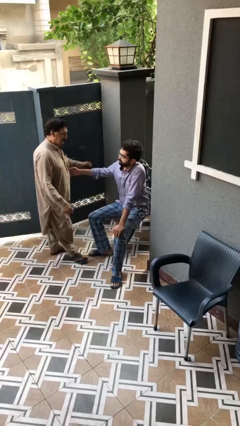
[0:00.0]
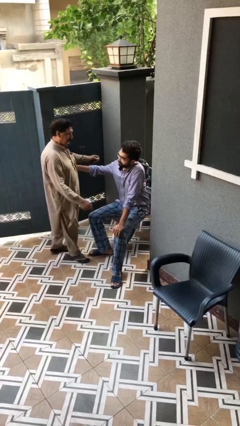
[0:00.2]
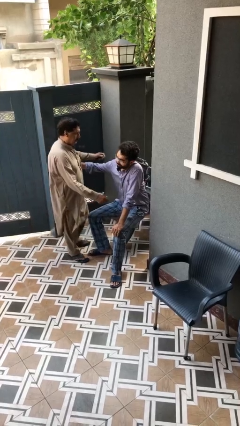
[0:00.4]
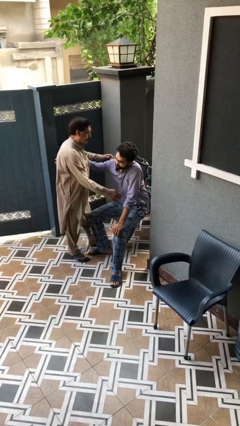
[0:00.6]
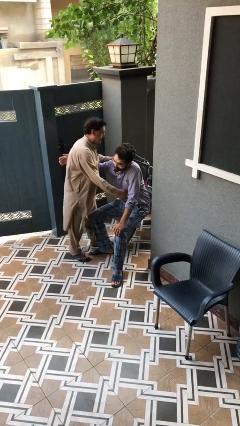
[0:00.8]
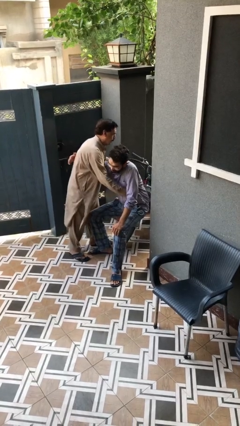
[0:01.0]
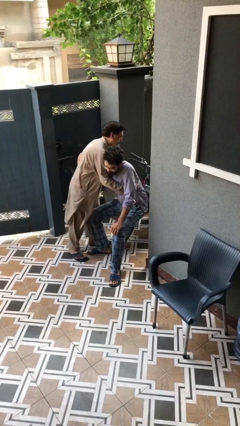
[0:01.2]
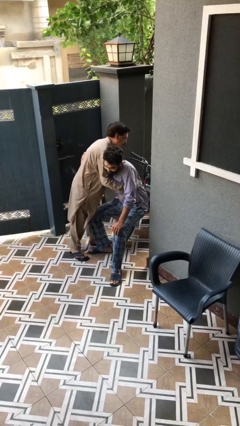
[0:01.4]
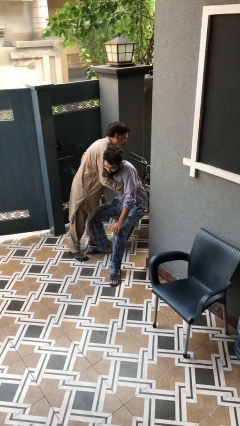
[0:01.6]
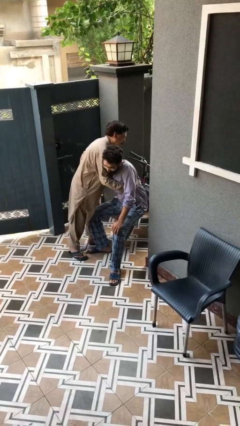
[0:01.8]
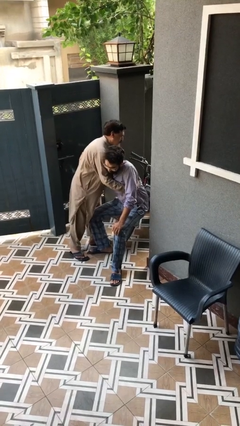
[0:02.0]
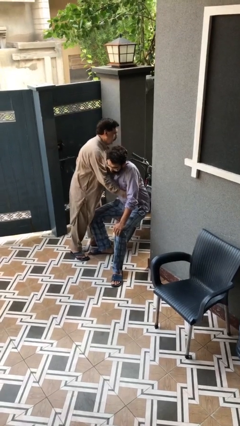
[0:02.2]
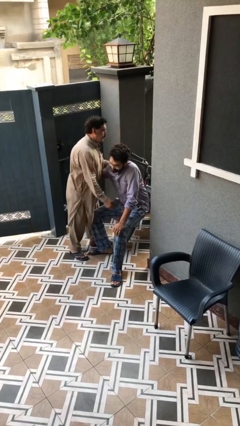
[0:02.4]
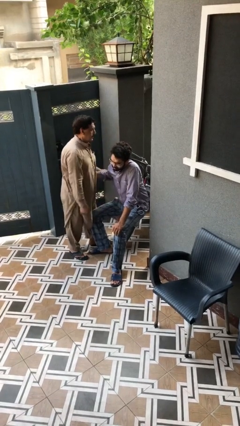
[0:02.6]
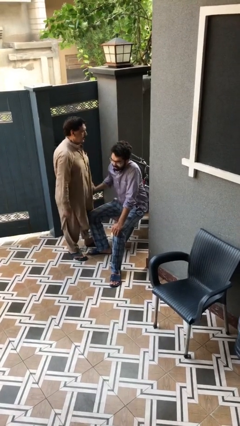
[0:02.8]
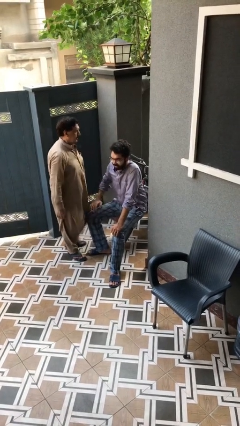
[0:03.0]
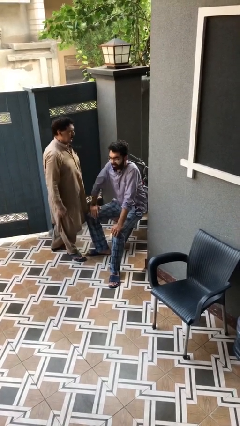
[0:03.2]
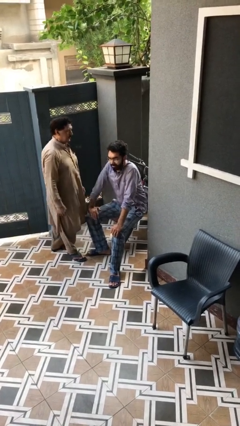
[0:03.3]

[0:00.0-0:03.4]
person embraces person

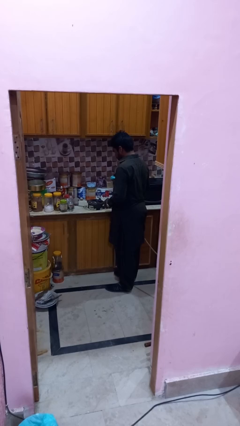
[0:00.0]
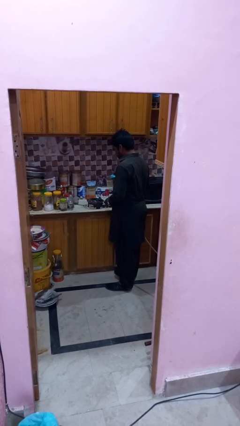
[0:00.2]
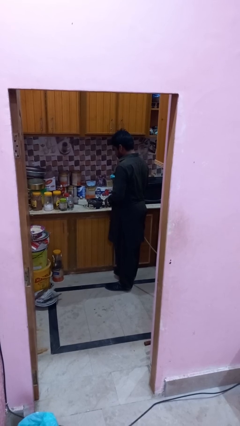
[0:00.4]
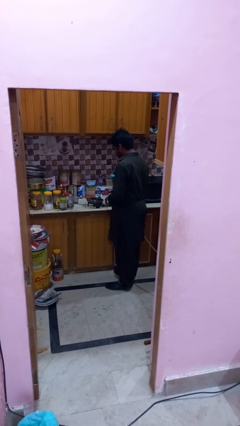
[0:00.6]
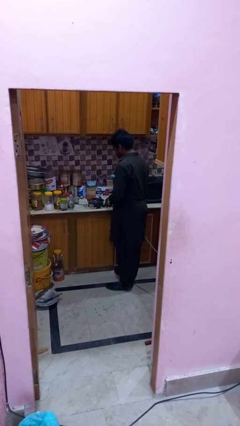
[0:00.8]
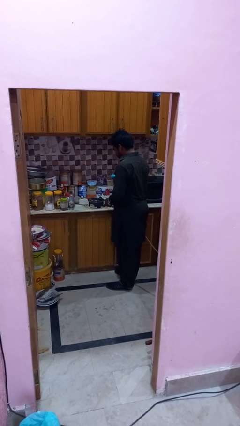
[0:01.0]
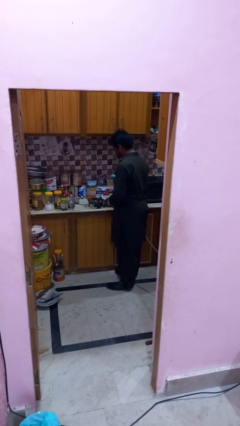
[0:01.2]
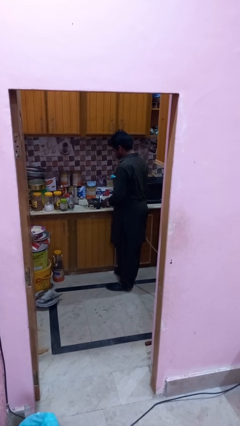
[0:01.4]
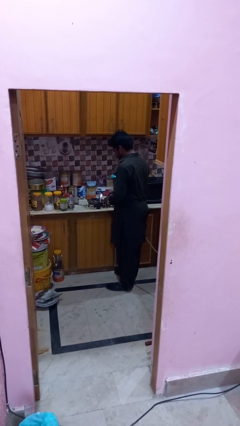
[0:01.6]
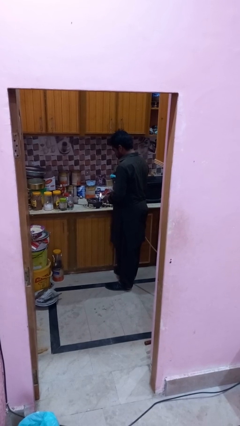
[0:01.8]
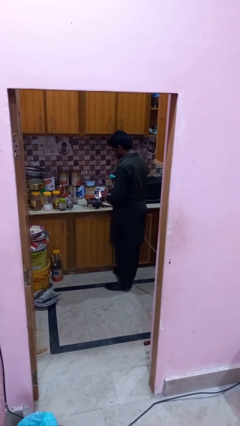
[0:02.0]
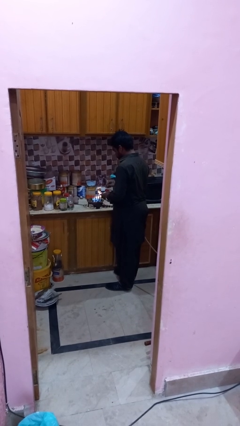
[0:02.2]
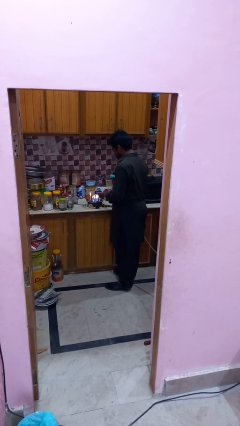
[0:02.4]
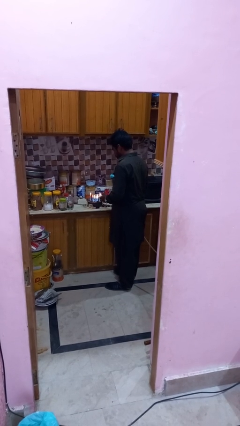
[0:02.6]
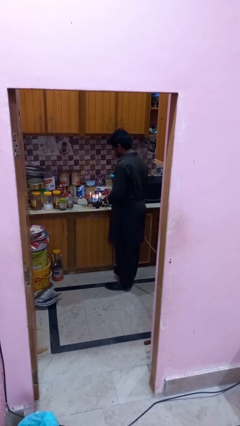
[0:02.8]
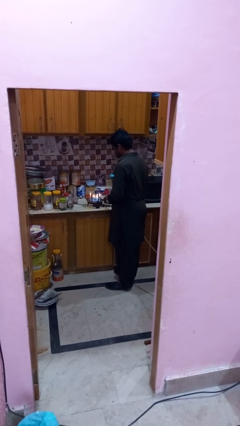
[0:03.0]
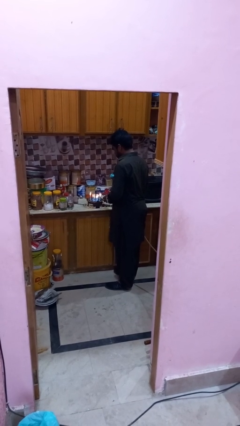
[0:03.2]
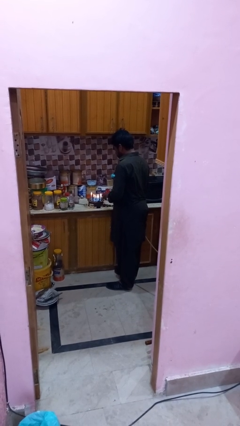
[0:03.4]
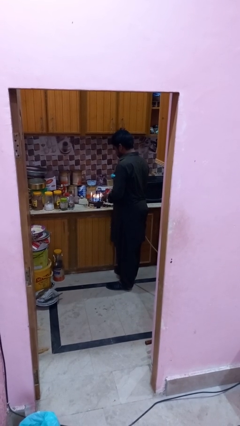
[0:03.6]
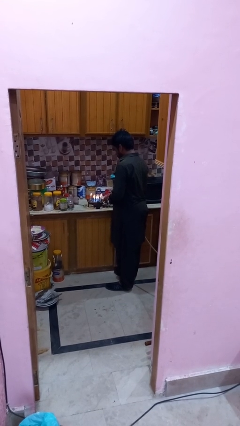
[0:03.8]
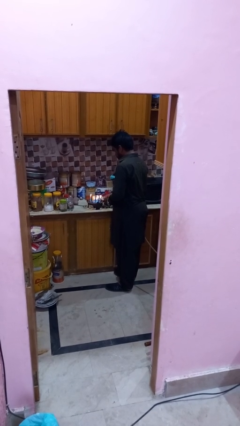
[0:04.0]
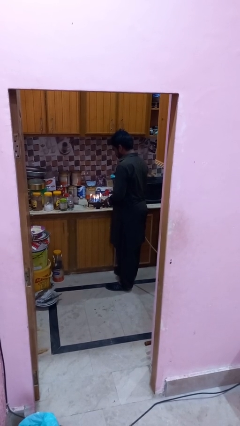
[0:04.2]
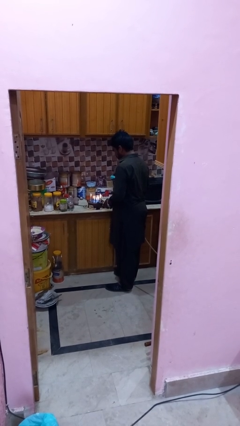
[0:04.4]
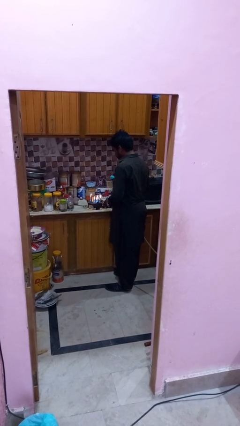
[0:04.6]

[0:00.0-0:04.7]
person turns on stovetop

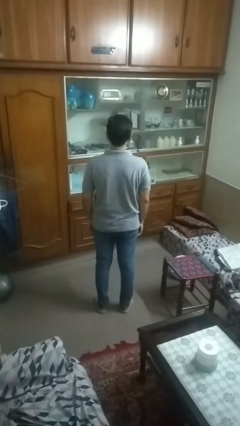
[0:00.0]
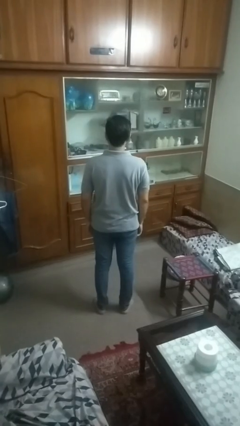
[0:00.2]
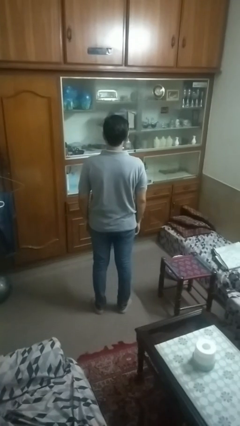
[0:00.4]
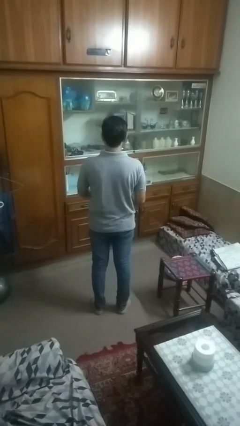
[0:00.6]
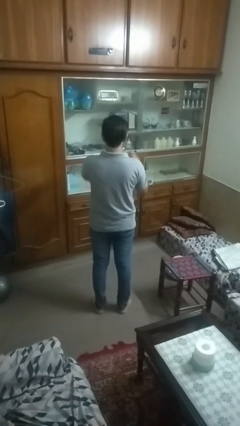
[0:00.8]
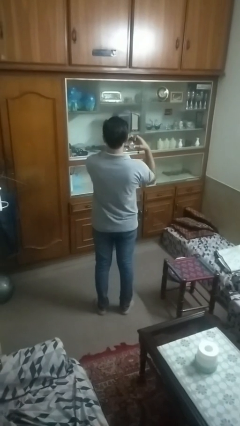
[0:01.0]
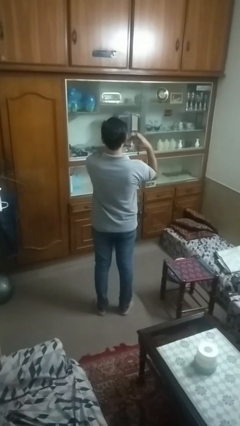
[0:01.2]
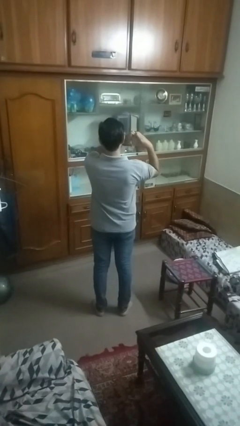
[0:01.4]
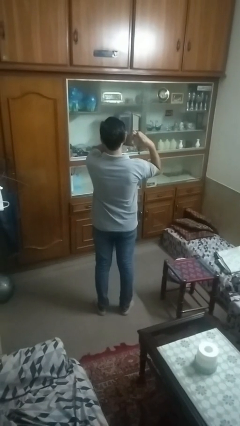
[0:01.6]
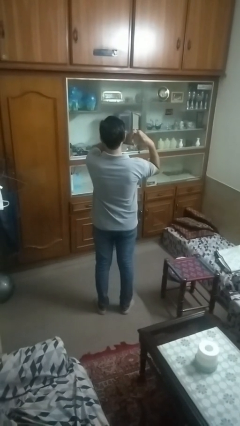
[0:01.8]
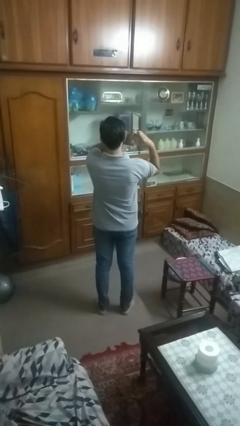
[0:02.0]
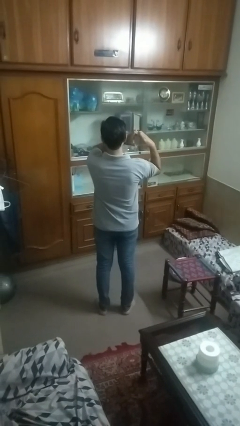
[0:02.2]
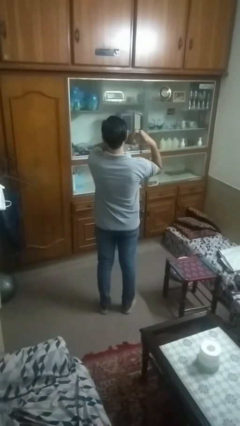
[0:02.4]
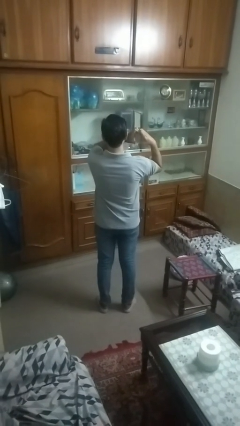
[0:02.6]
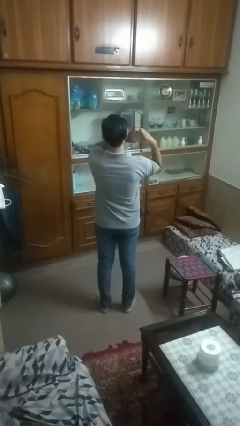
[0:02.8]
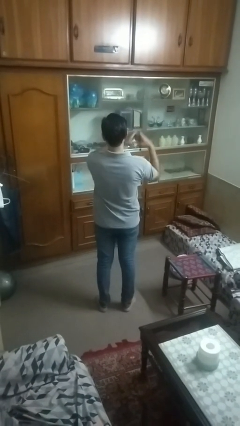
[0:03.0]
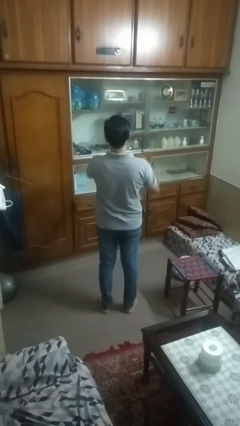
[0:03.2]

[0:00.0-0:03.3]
person gestures heart

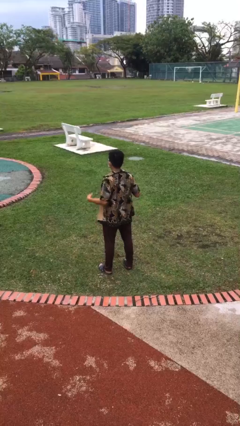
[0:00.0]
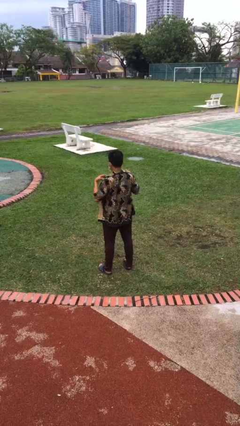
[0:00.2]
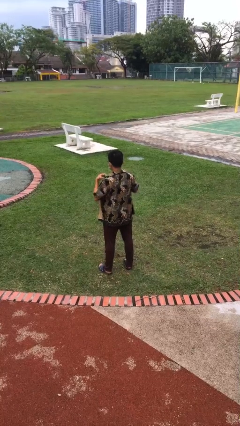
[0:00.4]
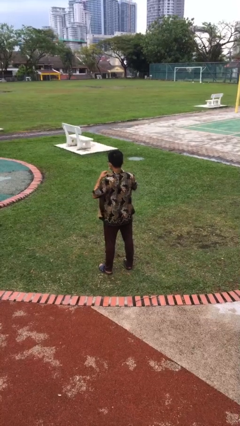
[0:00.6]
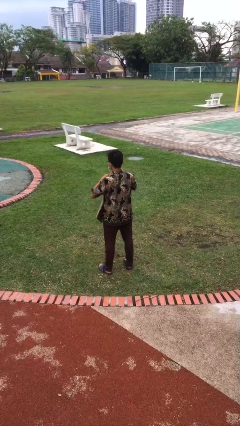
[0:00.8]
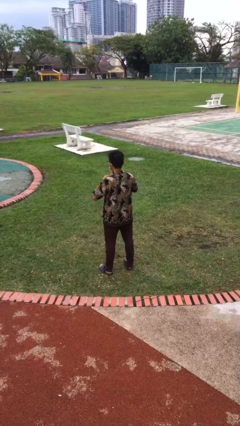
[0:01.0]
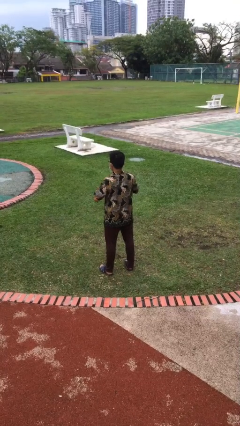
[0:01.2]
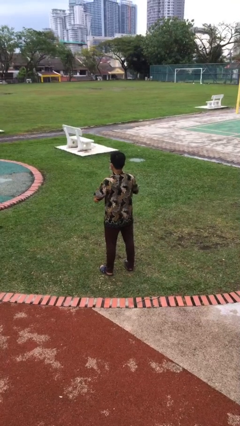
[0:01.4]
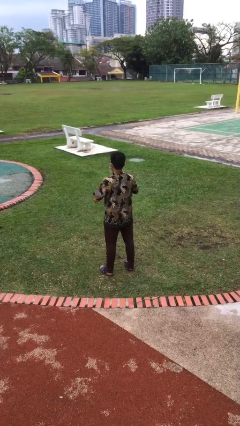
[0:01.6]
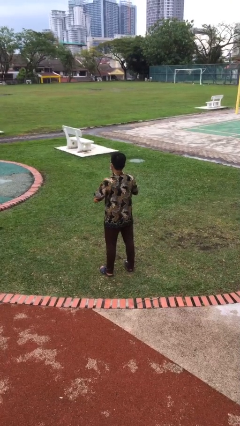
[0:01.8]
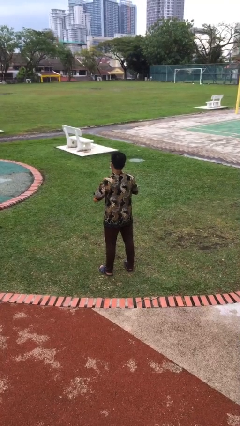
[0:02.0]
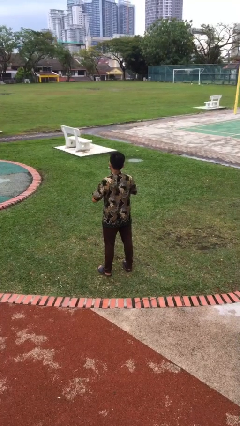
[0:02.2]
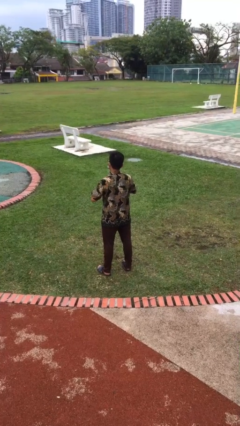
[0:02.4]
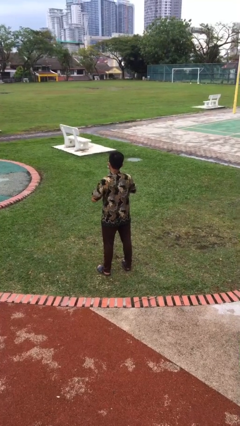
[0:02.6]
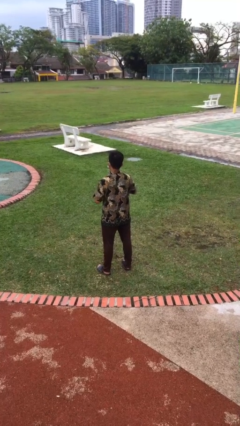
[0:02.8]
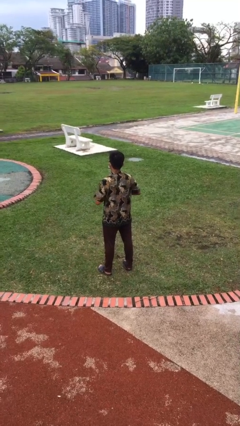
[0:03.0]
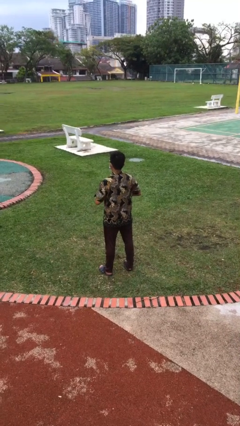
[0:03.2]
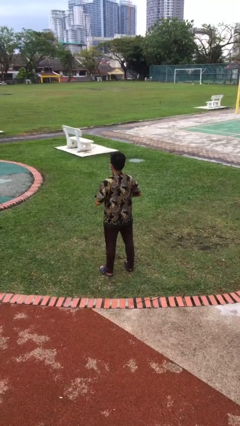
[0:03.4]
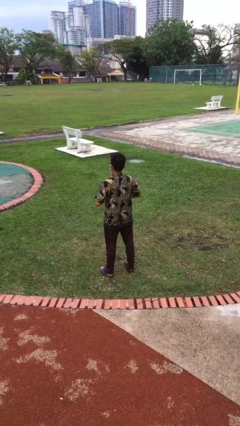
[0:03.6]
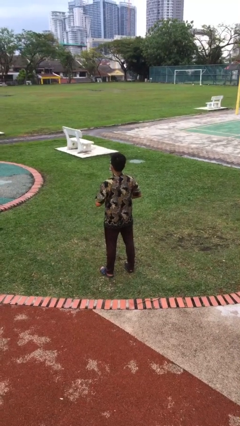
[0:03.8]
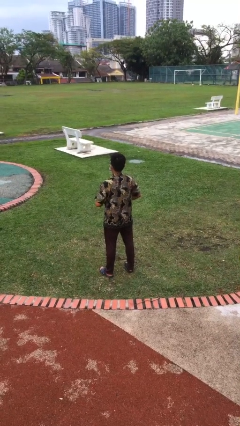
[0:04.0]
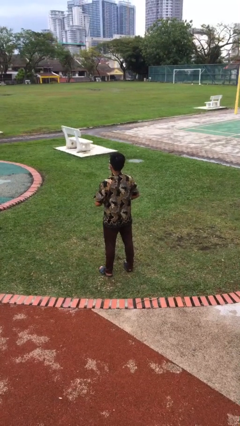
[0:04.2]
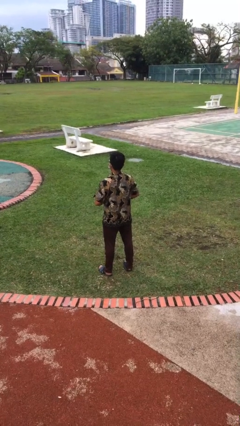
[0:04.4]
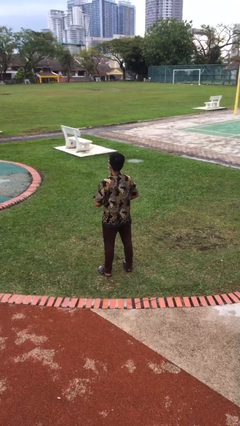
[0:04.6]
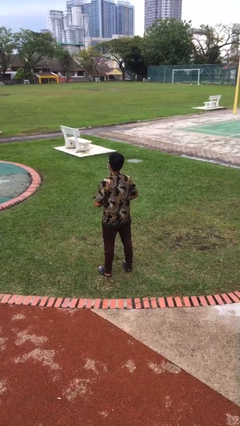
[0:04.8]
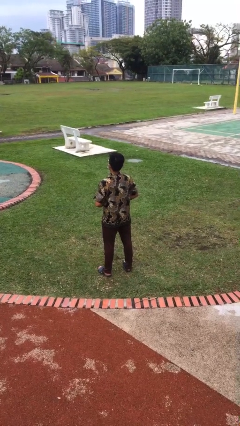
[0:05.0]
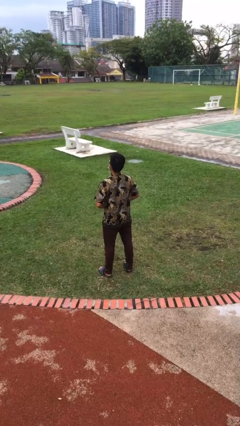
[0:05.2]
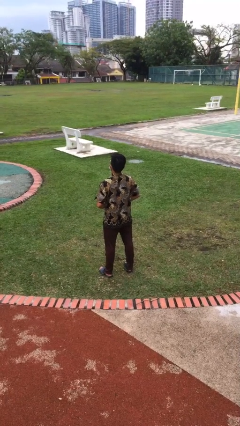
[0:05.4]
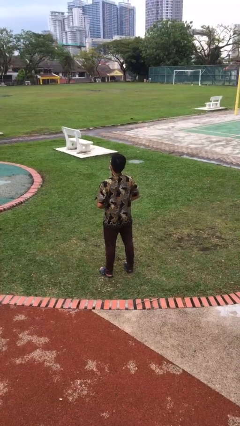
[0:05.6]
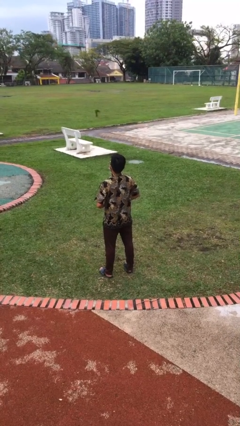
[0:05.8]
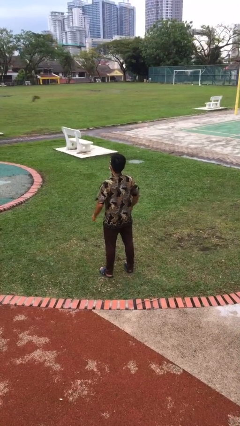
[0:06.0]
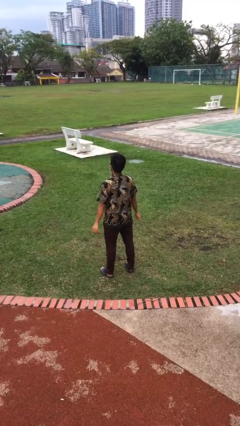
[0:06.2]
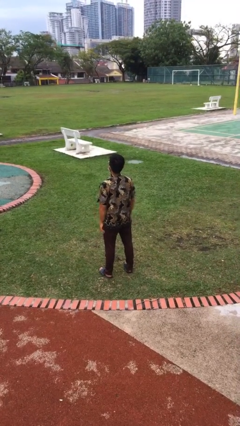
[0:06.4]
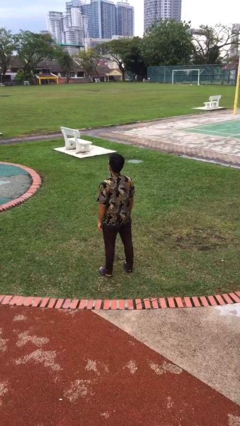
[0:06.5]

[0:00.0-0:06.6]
person buttons shirt

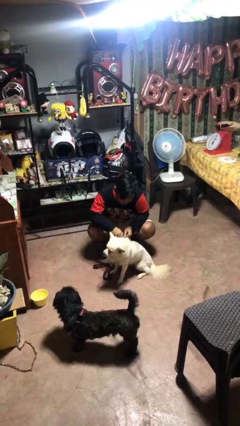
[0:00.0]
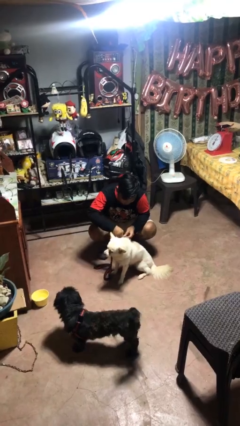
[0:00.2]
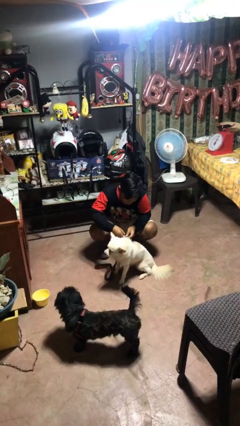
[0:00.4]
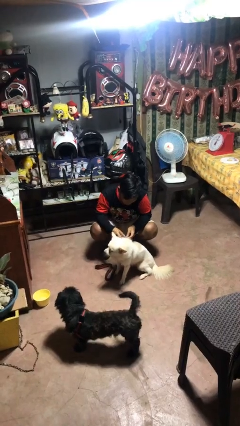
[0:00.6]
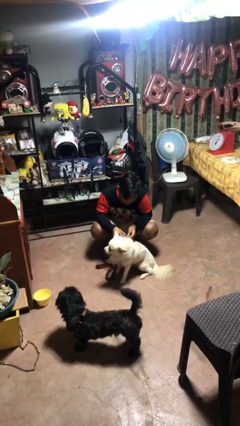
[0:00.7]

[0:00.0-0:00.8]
person attaches leash to dog
